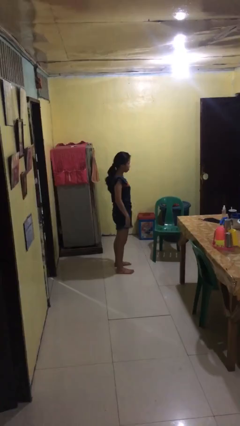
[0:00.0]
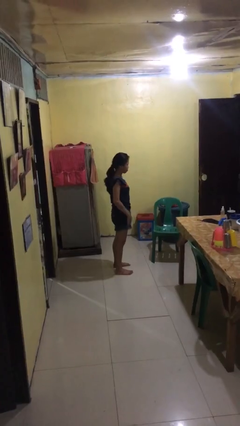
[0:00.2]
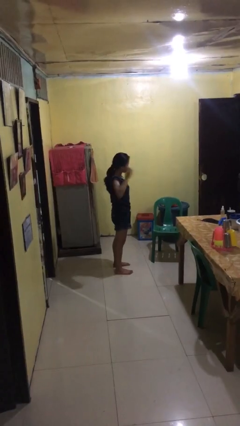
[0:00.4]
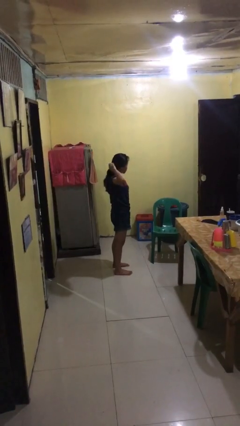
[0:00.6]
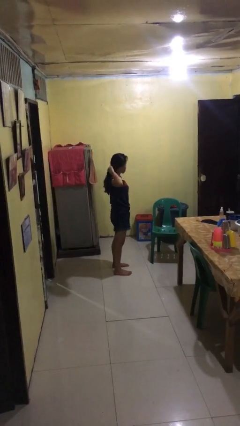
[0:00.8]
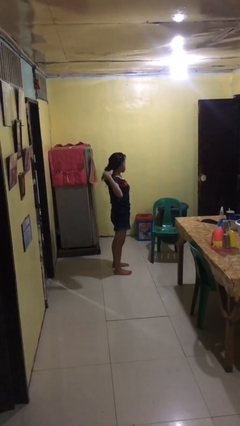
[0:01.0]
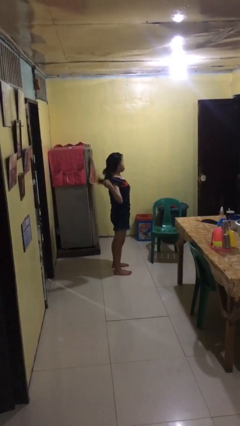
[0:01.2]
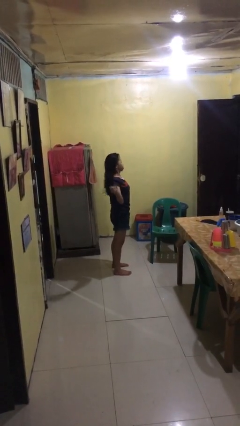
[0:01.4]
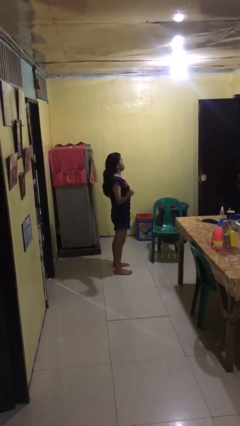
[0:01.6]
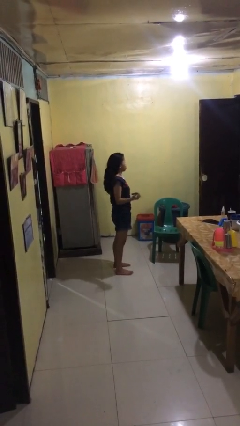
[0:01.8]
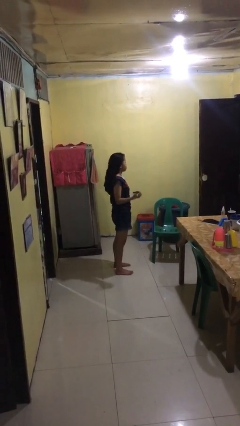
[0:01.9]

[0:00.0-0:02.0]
person takes off hairtie

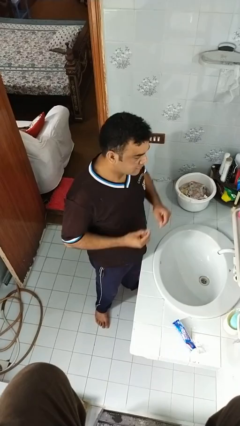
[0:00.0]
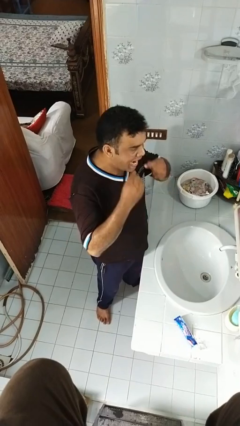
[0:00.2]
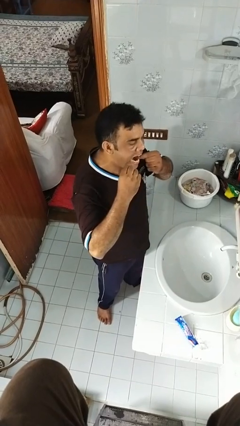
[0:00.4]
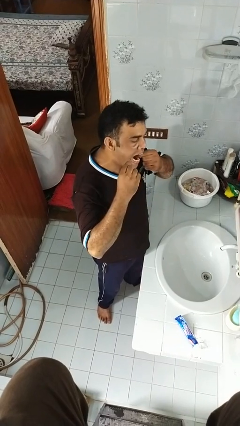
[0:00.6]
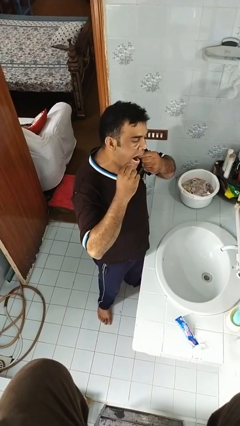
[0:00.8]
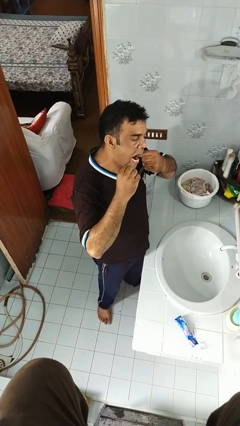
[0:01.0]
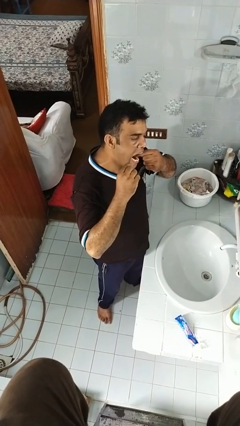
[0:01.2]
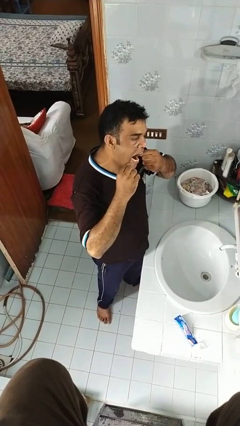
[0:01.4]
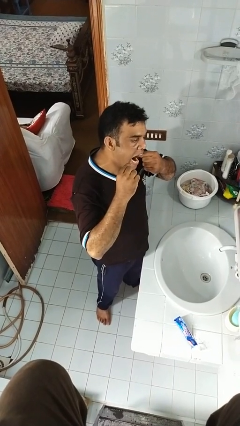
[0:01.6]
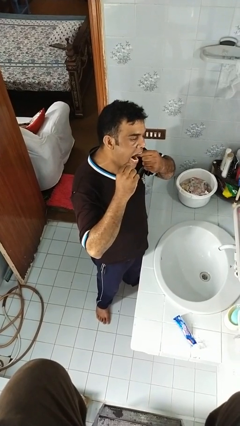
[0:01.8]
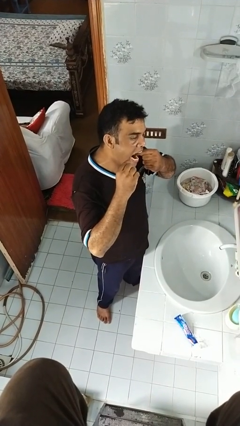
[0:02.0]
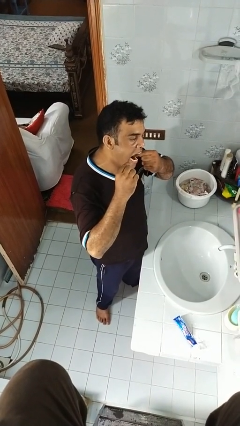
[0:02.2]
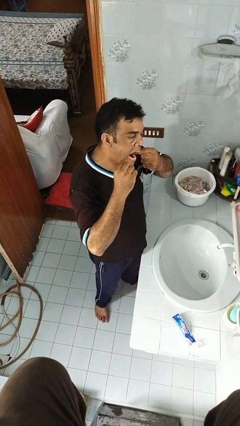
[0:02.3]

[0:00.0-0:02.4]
person flosses

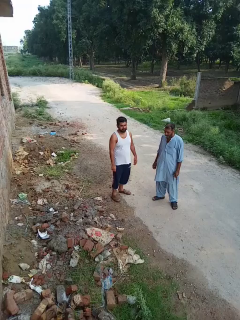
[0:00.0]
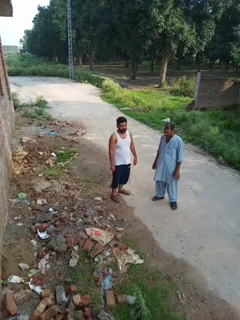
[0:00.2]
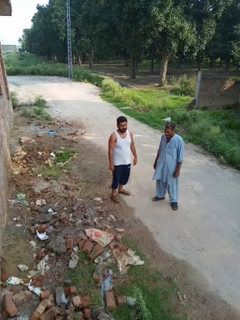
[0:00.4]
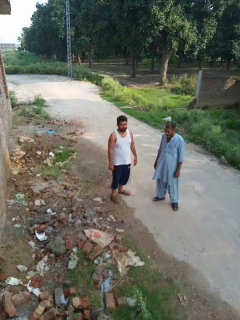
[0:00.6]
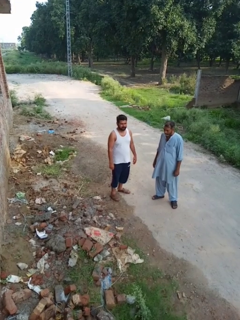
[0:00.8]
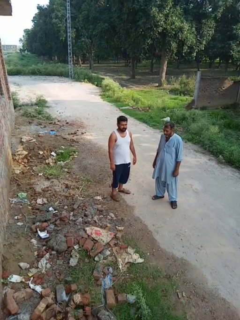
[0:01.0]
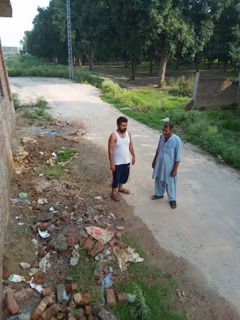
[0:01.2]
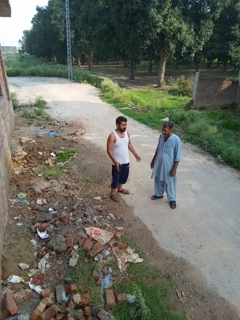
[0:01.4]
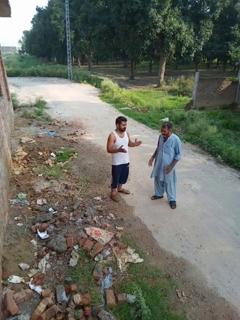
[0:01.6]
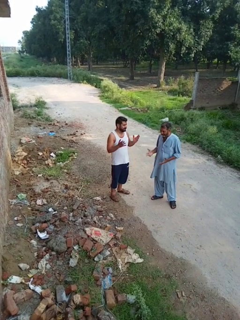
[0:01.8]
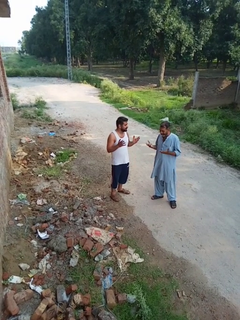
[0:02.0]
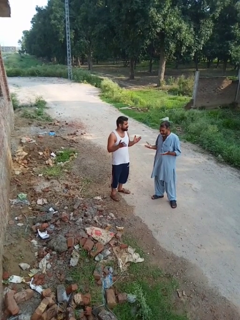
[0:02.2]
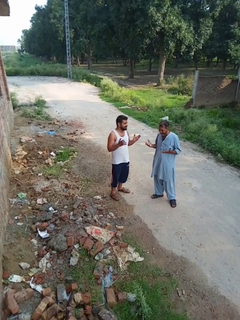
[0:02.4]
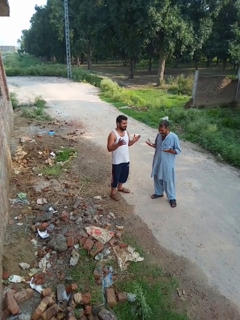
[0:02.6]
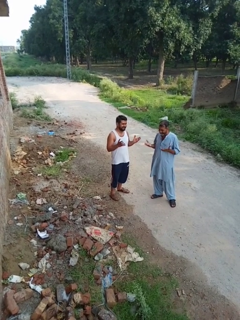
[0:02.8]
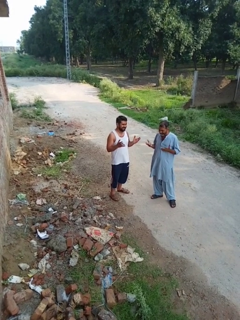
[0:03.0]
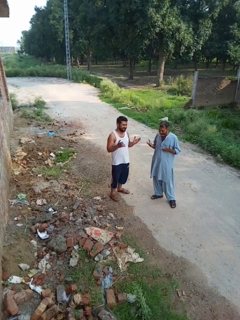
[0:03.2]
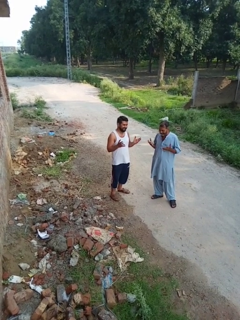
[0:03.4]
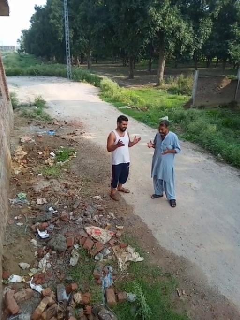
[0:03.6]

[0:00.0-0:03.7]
person laughs with person

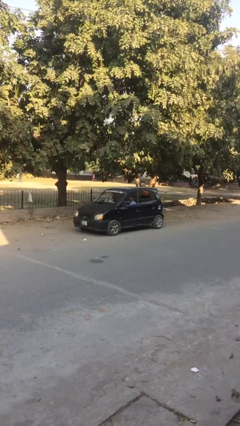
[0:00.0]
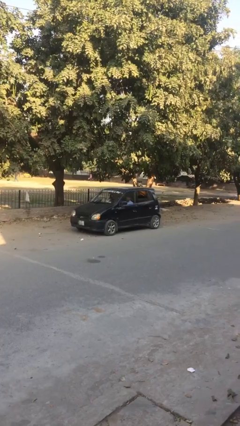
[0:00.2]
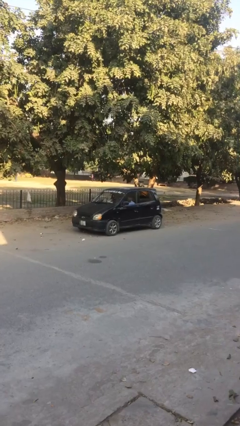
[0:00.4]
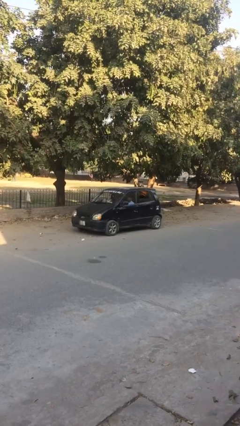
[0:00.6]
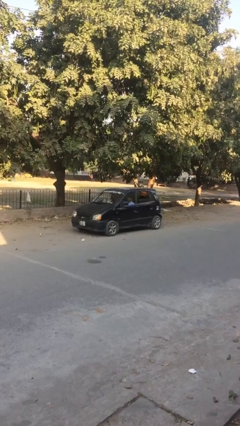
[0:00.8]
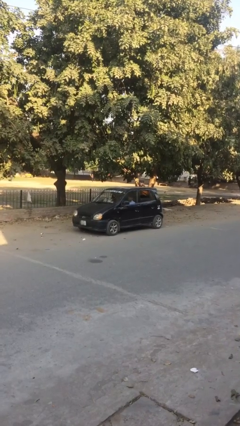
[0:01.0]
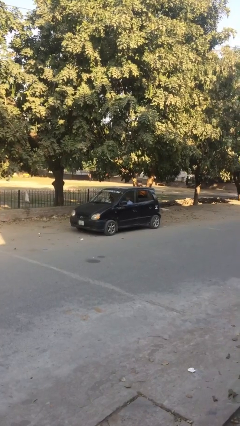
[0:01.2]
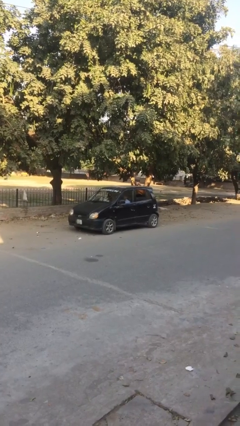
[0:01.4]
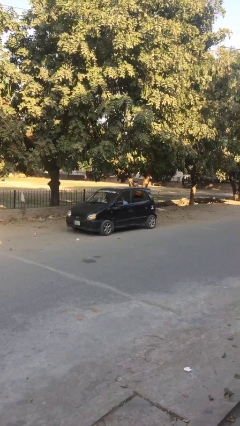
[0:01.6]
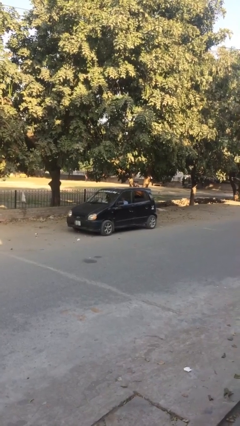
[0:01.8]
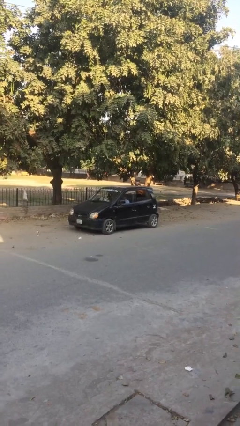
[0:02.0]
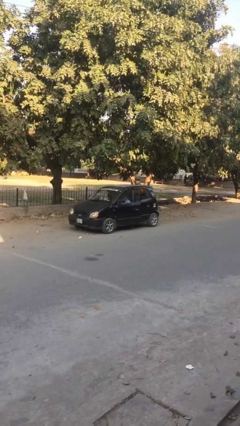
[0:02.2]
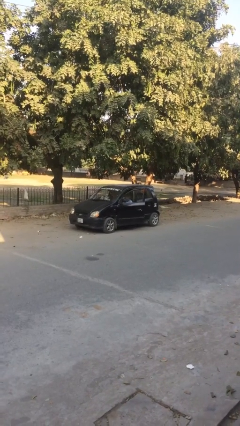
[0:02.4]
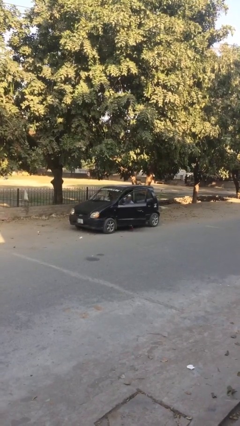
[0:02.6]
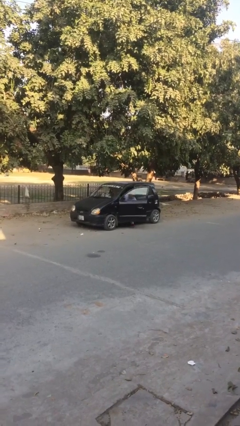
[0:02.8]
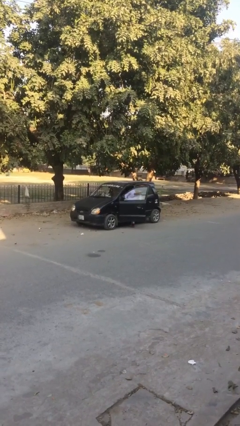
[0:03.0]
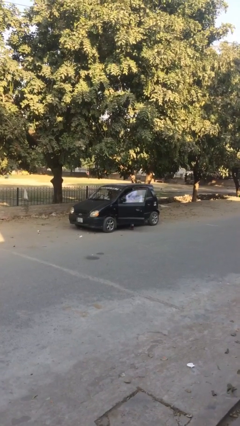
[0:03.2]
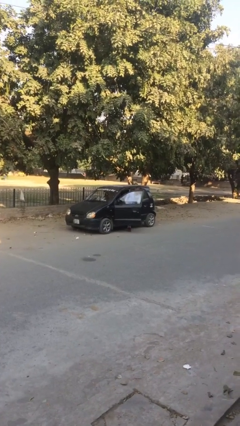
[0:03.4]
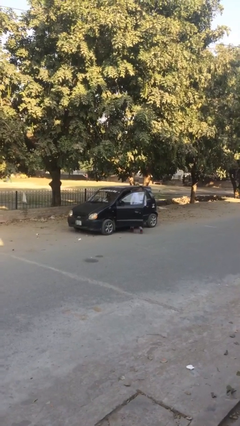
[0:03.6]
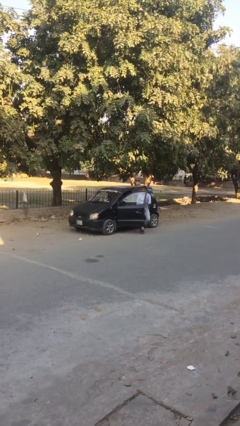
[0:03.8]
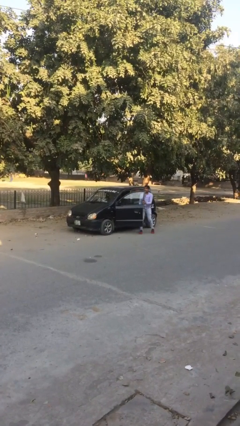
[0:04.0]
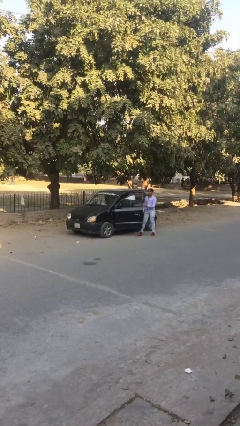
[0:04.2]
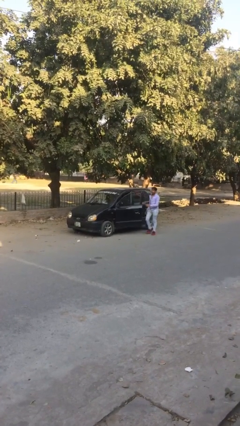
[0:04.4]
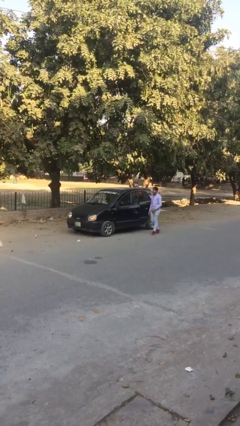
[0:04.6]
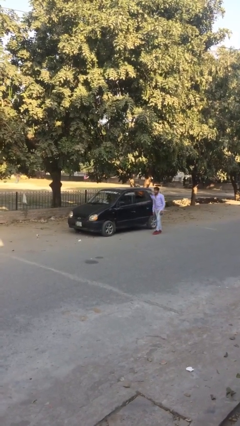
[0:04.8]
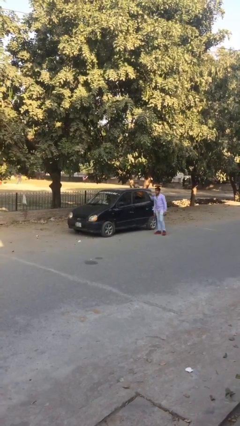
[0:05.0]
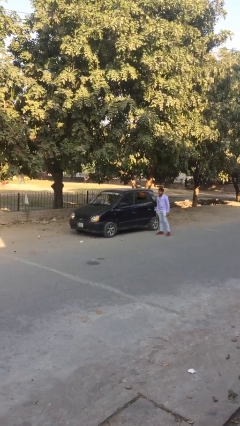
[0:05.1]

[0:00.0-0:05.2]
car drops off person

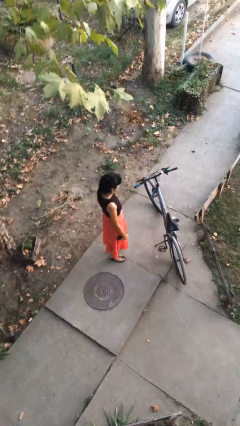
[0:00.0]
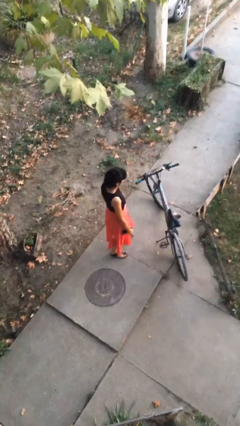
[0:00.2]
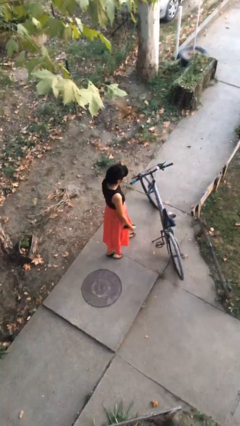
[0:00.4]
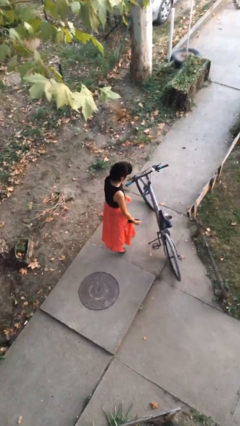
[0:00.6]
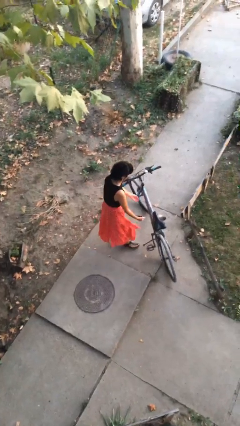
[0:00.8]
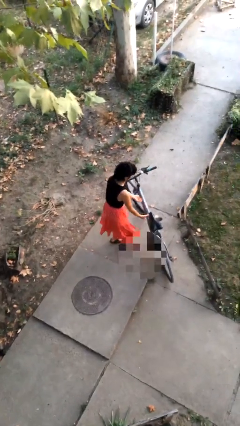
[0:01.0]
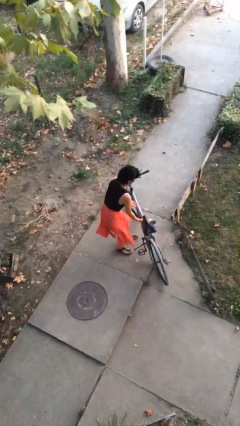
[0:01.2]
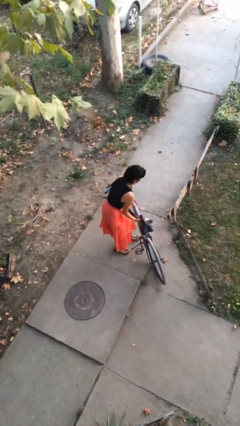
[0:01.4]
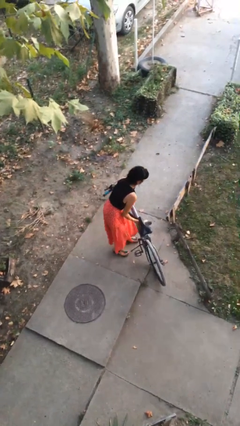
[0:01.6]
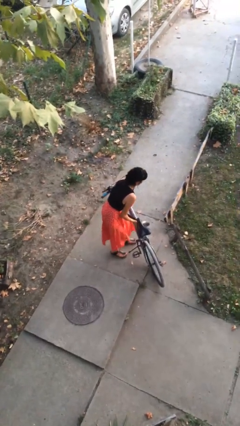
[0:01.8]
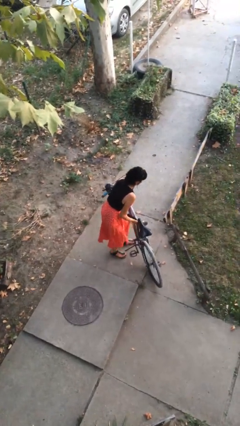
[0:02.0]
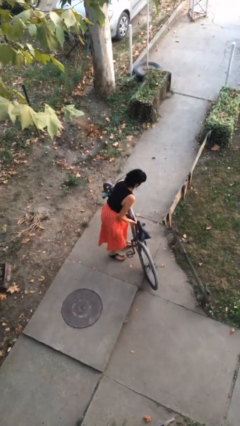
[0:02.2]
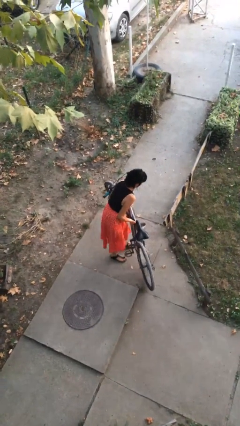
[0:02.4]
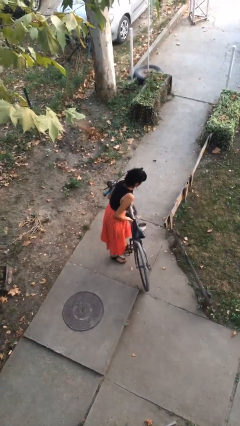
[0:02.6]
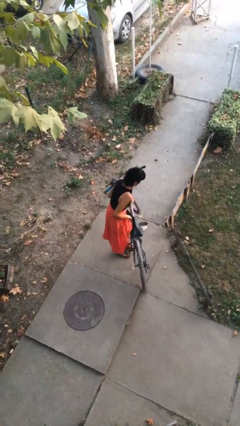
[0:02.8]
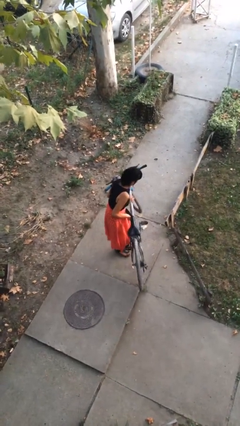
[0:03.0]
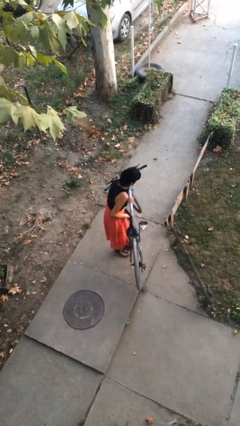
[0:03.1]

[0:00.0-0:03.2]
person picks up object from floor

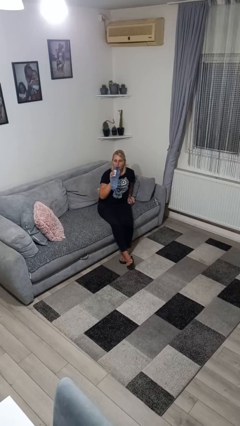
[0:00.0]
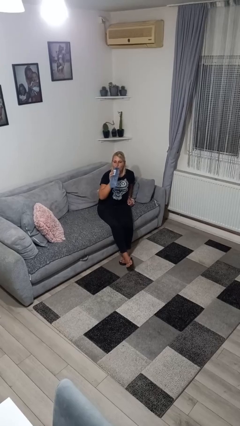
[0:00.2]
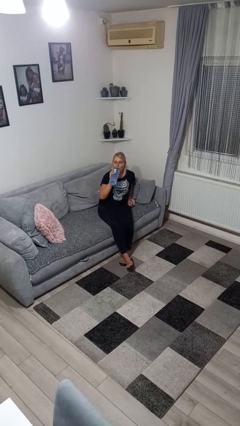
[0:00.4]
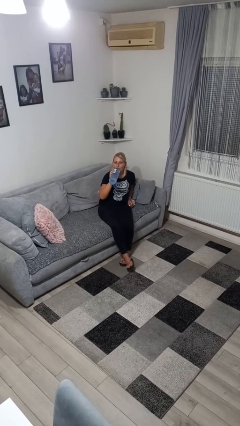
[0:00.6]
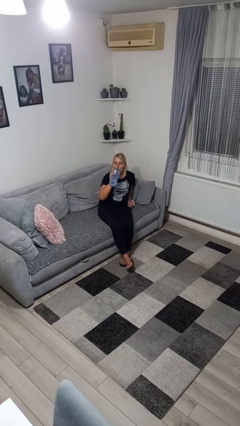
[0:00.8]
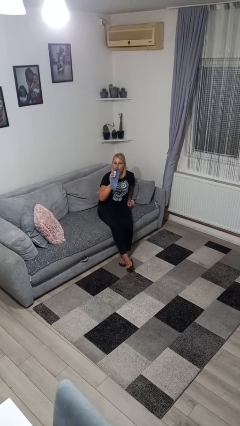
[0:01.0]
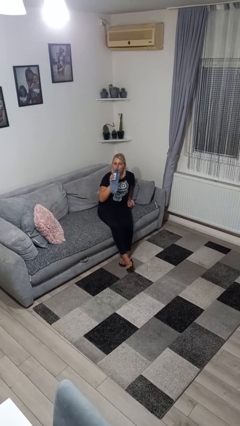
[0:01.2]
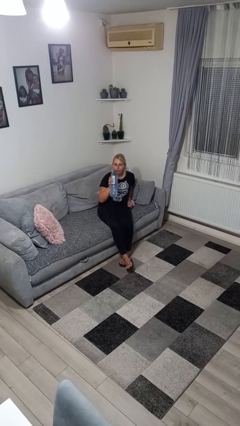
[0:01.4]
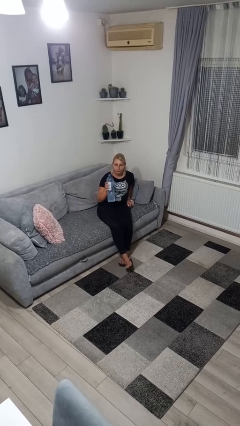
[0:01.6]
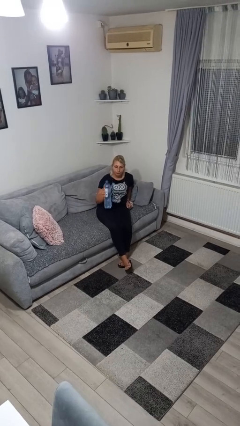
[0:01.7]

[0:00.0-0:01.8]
person drinks from bottle
